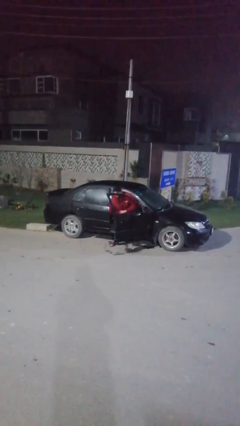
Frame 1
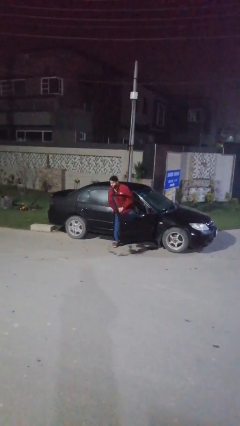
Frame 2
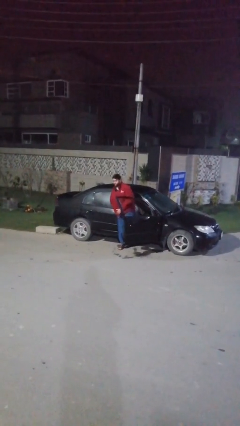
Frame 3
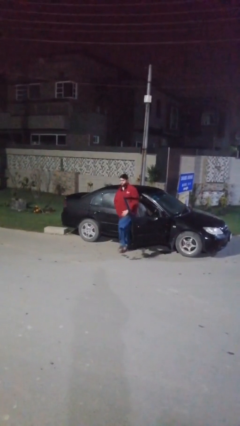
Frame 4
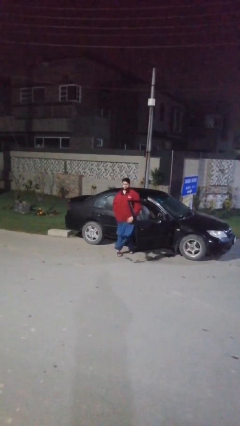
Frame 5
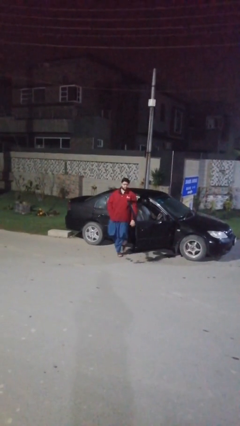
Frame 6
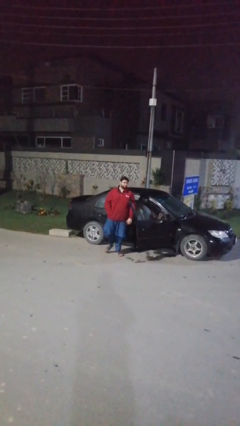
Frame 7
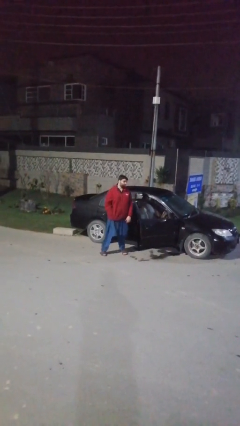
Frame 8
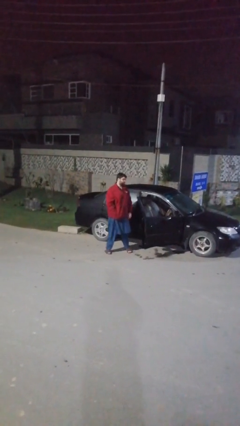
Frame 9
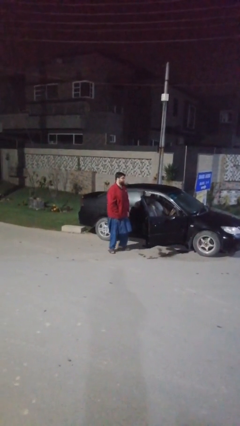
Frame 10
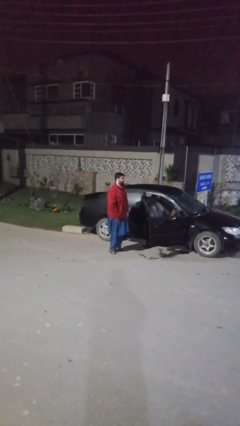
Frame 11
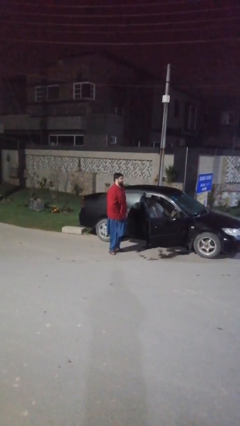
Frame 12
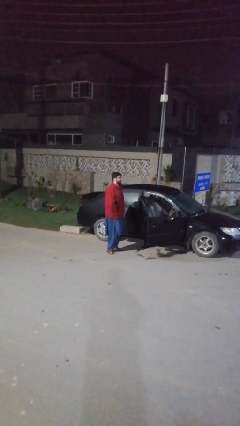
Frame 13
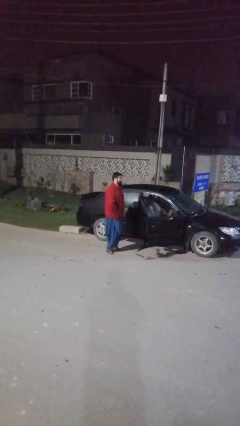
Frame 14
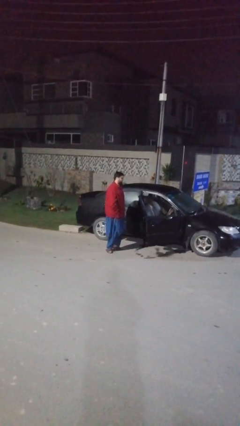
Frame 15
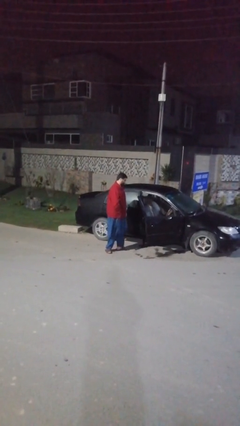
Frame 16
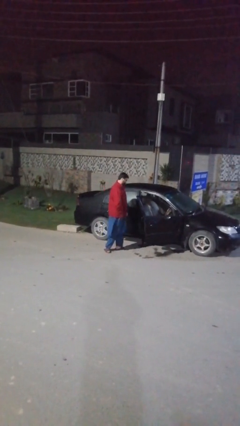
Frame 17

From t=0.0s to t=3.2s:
person exits car

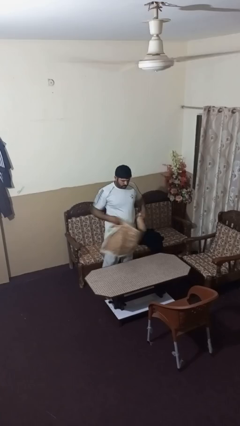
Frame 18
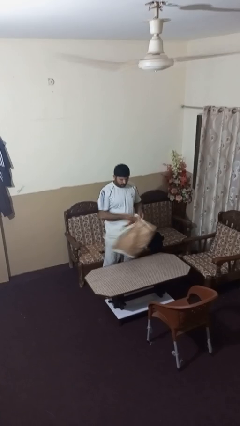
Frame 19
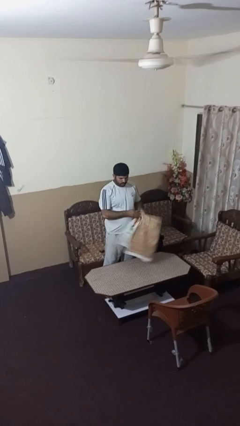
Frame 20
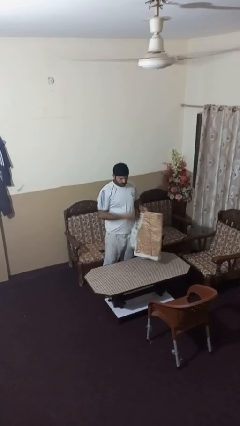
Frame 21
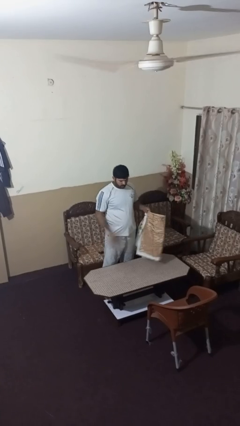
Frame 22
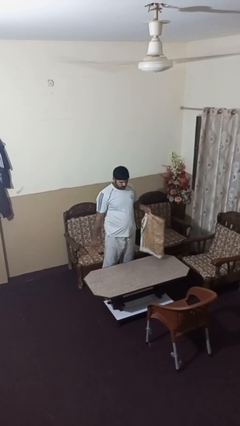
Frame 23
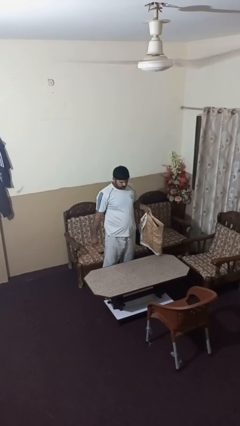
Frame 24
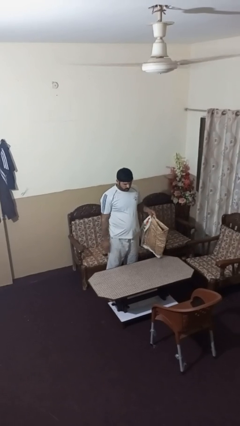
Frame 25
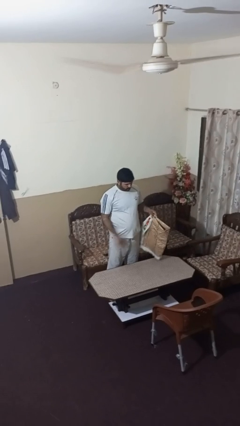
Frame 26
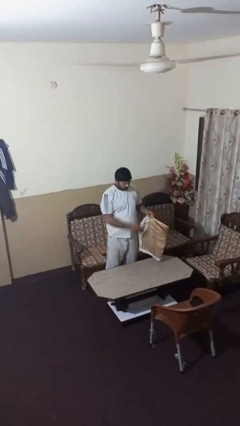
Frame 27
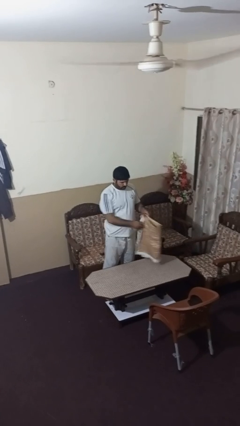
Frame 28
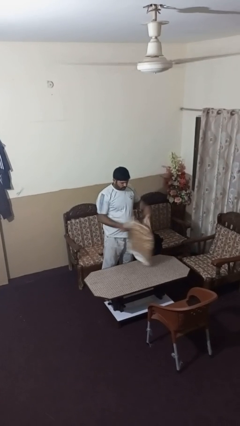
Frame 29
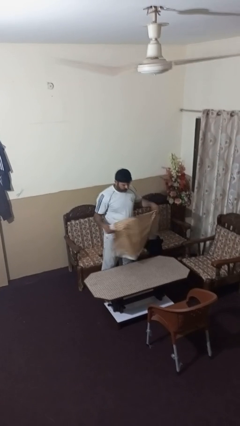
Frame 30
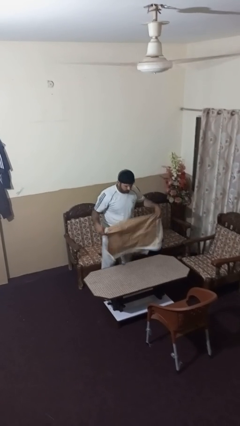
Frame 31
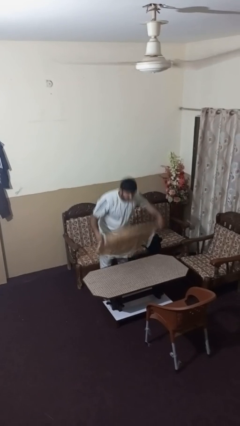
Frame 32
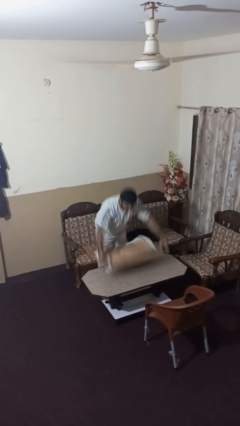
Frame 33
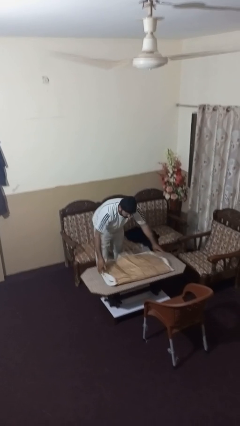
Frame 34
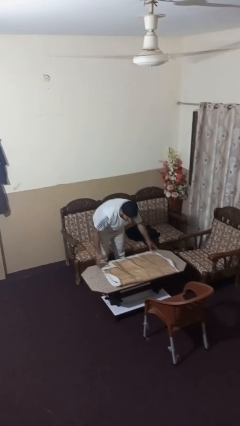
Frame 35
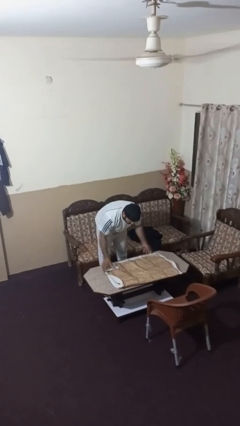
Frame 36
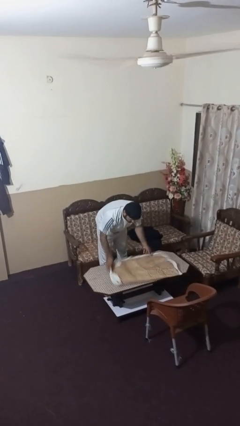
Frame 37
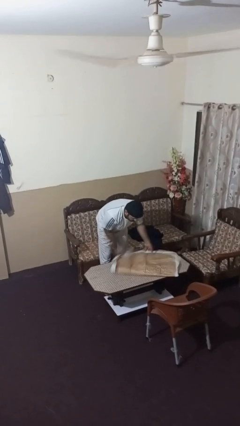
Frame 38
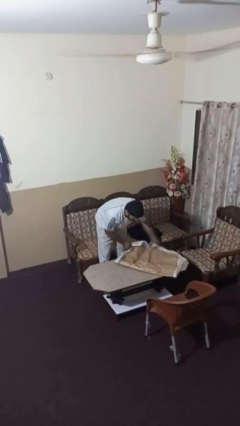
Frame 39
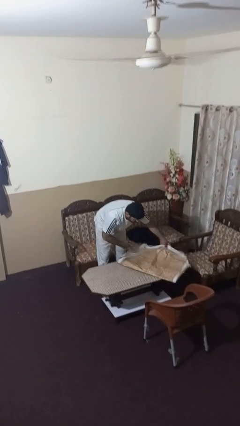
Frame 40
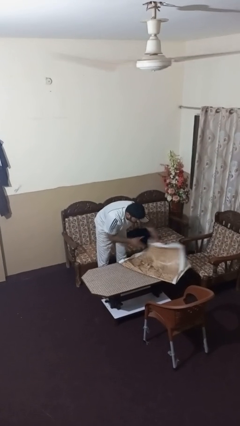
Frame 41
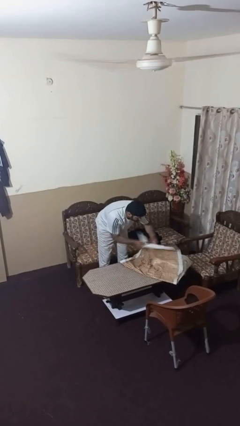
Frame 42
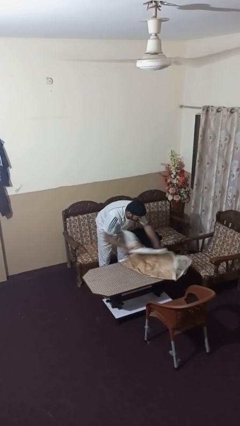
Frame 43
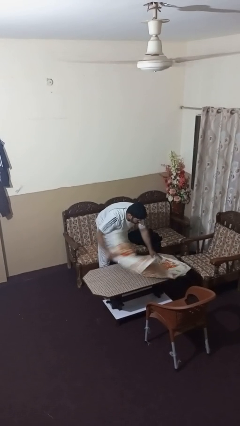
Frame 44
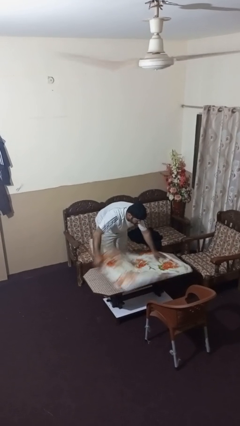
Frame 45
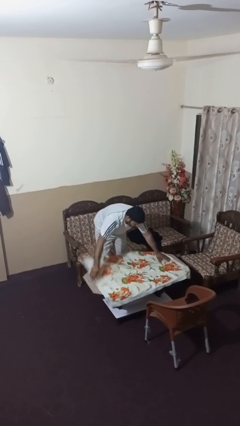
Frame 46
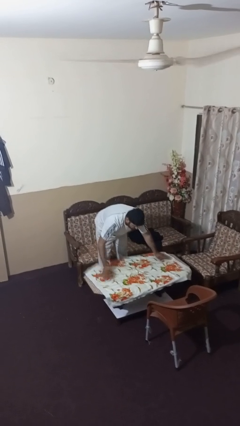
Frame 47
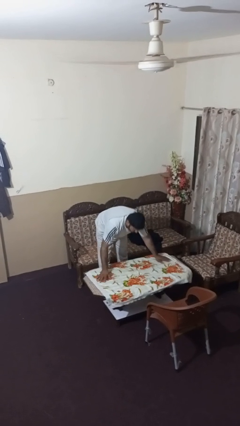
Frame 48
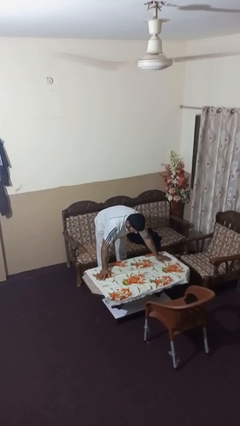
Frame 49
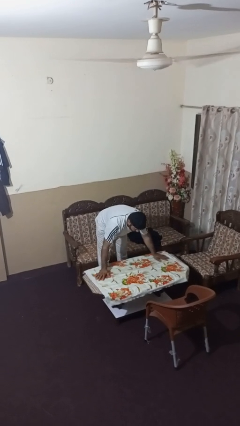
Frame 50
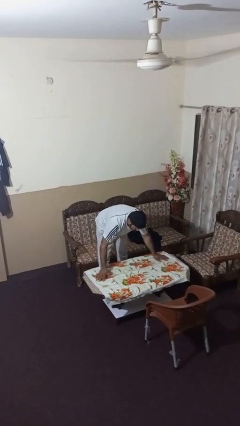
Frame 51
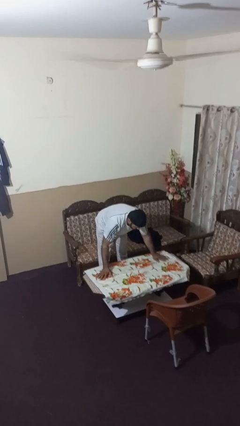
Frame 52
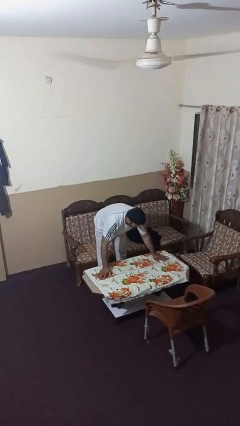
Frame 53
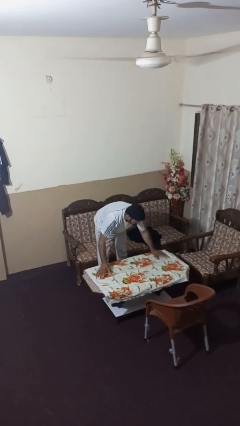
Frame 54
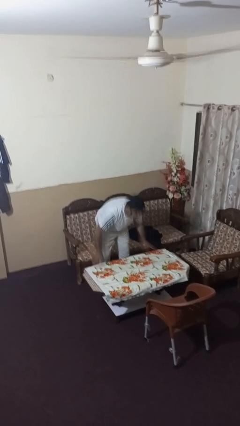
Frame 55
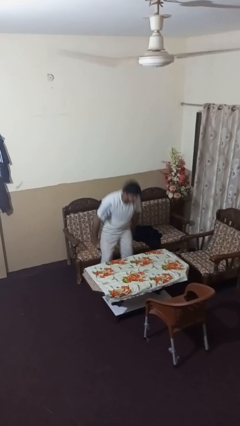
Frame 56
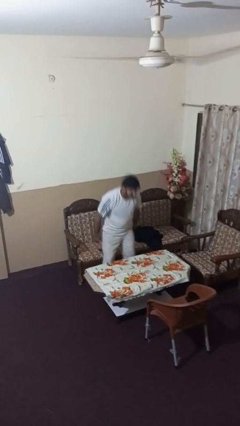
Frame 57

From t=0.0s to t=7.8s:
person spreads tablecloth

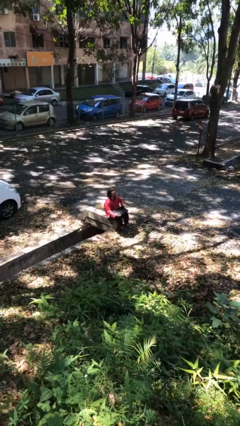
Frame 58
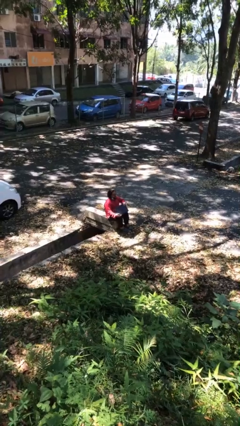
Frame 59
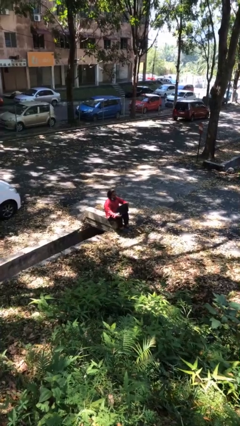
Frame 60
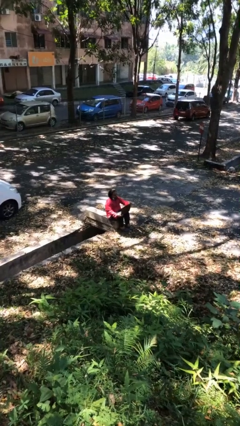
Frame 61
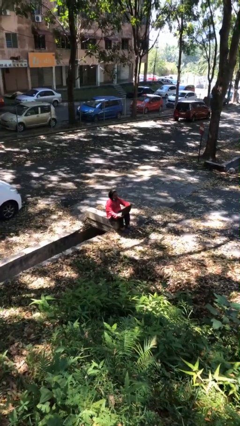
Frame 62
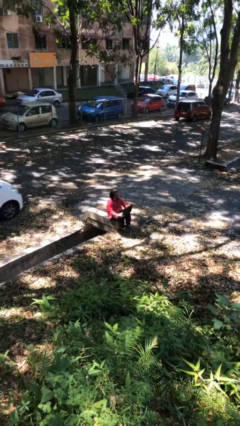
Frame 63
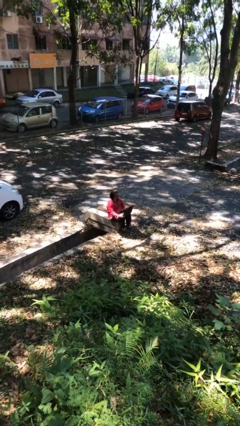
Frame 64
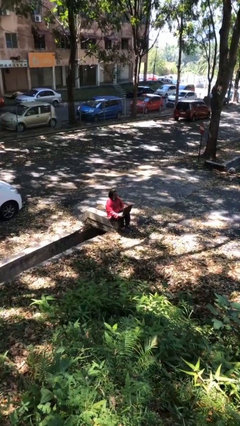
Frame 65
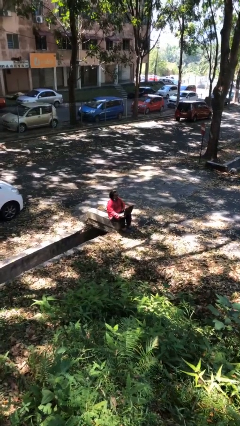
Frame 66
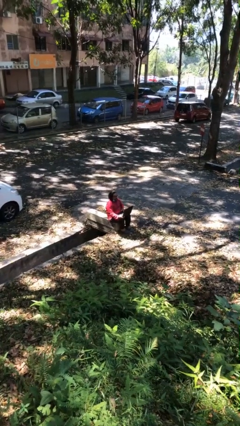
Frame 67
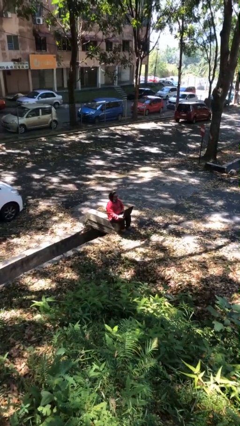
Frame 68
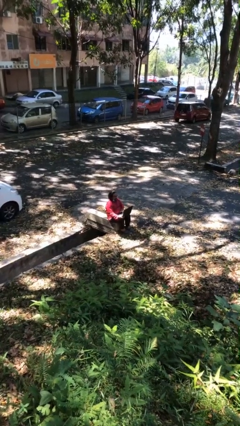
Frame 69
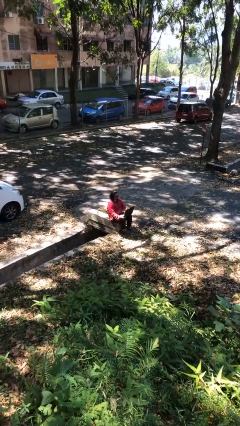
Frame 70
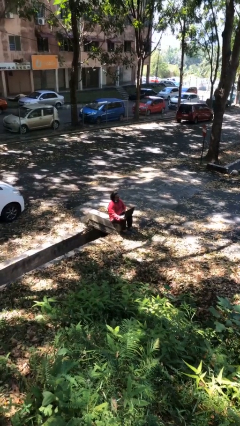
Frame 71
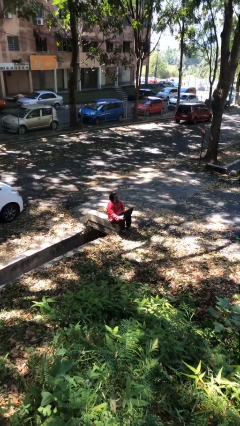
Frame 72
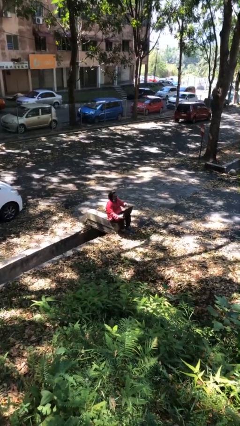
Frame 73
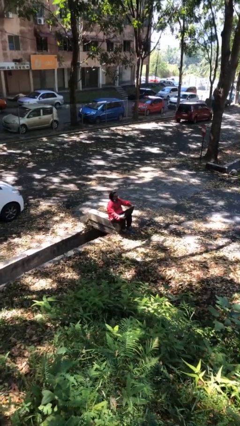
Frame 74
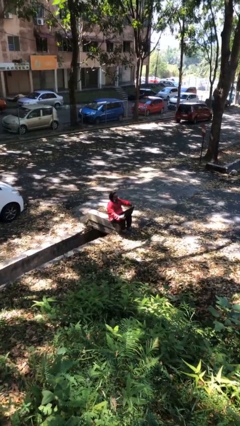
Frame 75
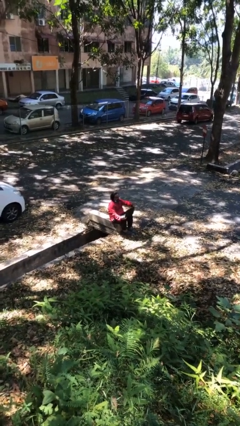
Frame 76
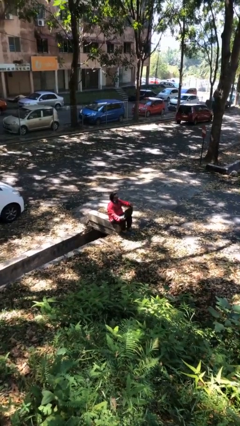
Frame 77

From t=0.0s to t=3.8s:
person interacts with laptop

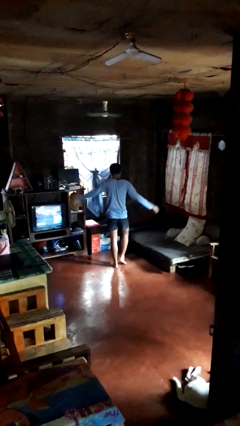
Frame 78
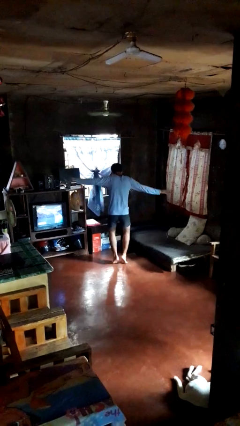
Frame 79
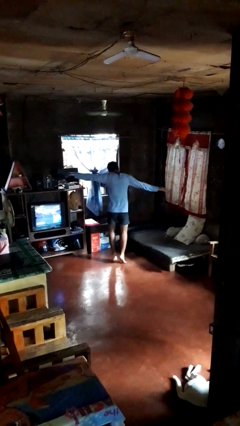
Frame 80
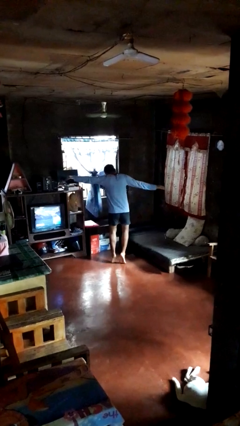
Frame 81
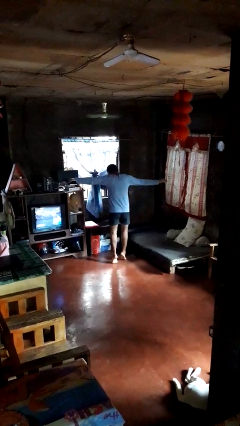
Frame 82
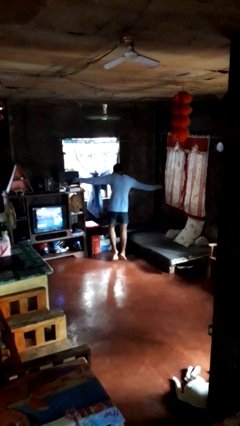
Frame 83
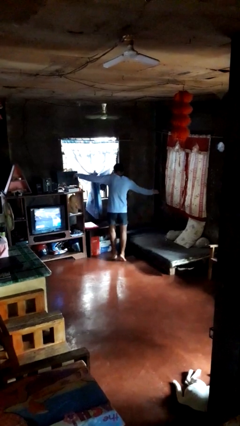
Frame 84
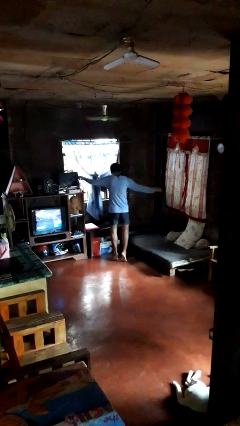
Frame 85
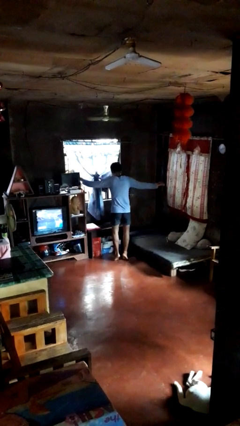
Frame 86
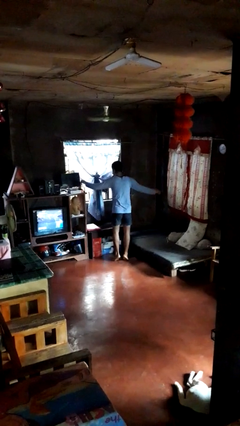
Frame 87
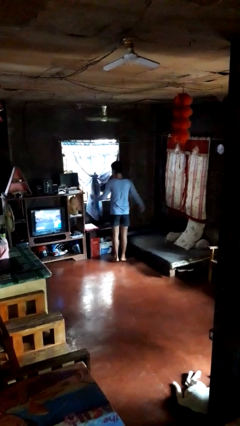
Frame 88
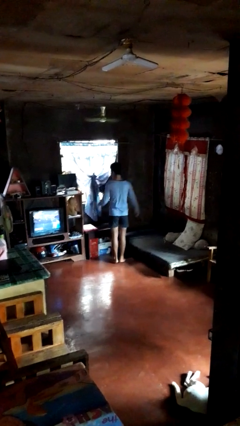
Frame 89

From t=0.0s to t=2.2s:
person walks tiptoe
